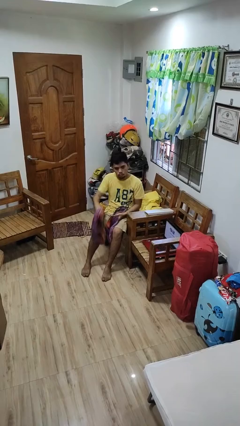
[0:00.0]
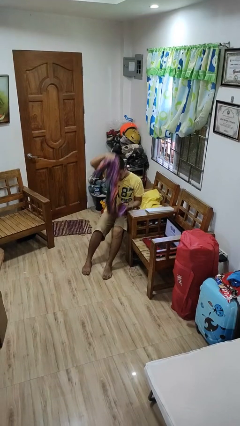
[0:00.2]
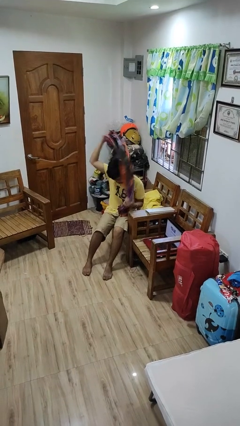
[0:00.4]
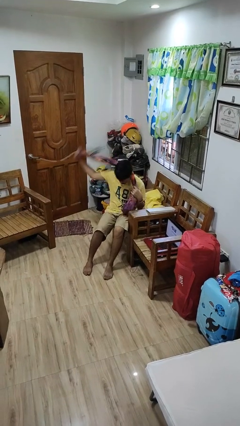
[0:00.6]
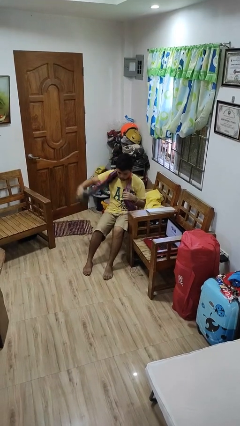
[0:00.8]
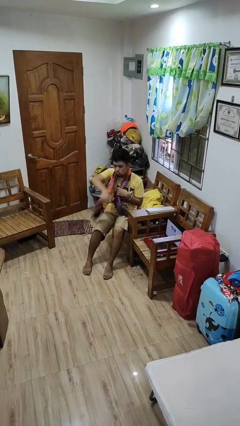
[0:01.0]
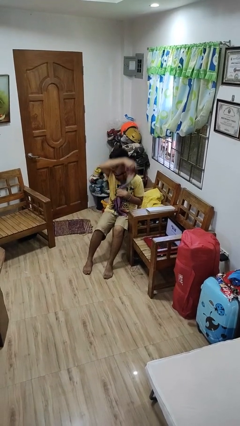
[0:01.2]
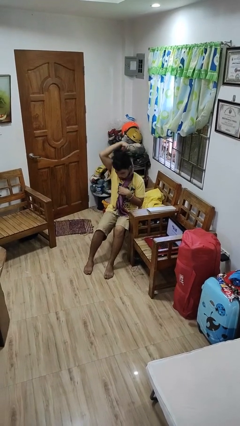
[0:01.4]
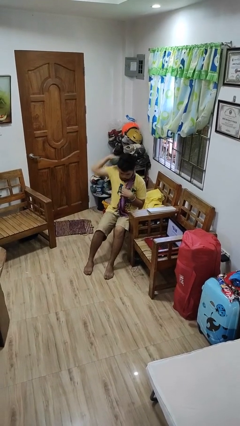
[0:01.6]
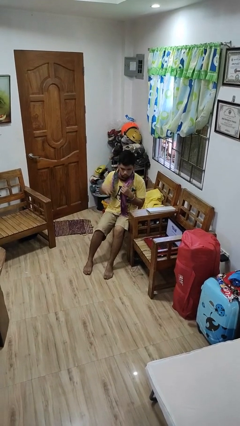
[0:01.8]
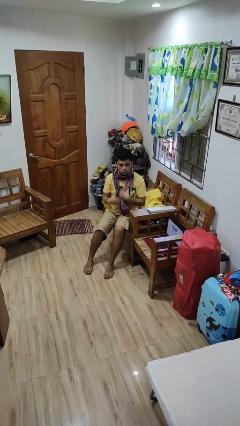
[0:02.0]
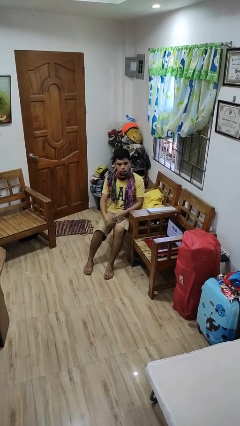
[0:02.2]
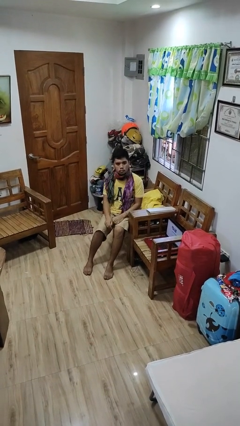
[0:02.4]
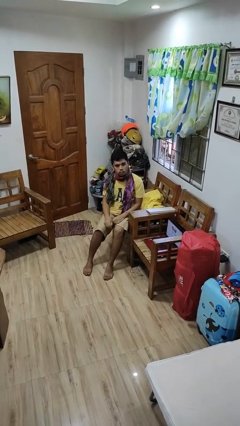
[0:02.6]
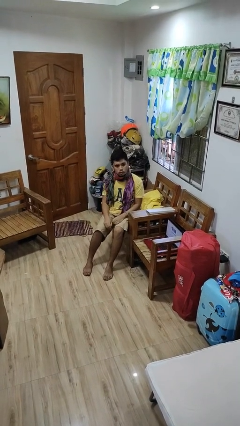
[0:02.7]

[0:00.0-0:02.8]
person puts on scarf

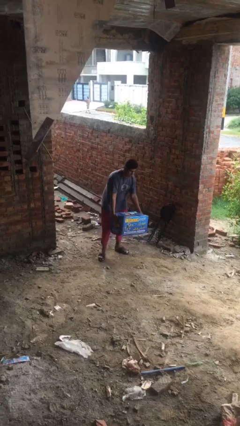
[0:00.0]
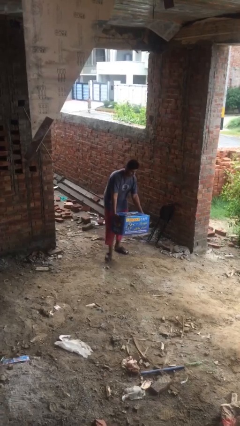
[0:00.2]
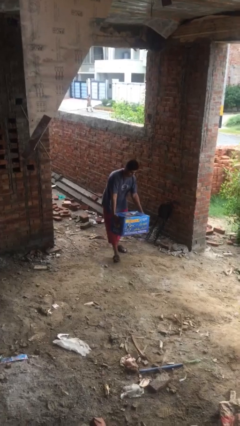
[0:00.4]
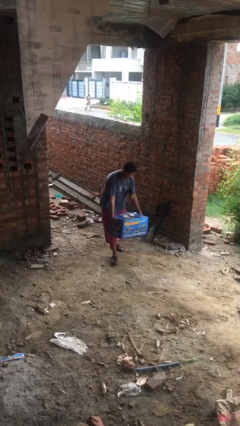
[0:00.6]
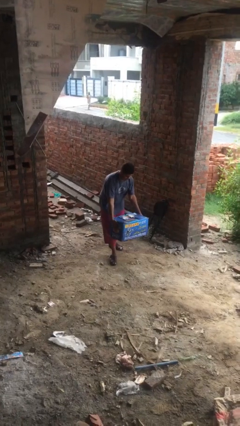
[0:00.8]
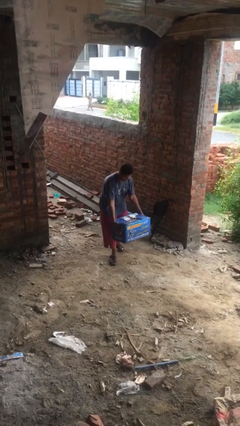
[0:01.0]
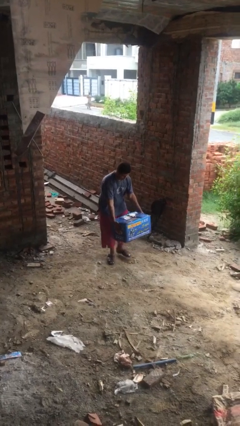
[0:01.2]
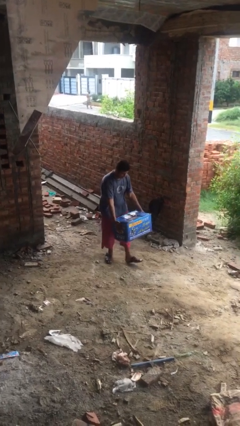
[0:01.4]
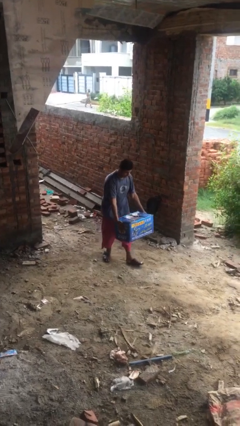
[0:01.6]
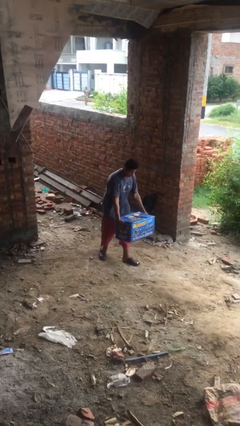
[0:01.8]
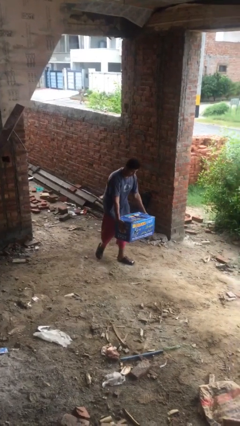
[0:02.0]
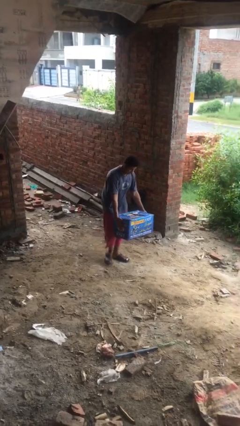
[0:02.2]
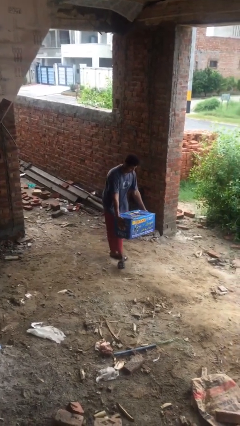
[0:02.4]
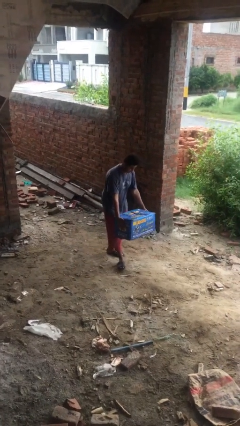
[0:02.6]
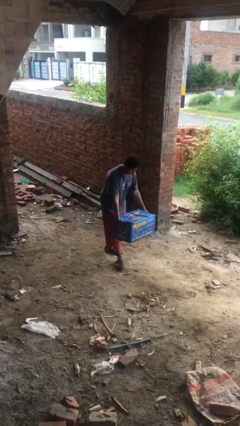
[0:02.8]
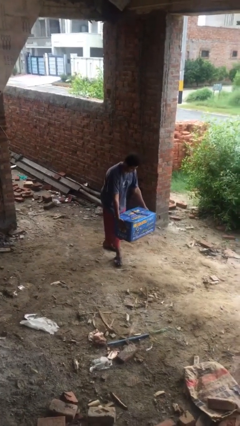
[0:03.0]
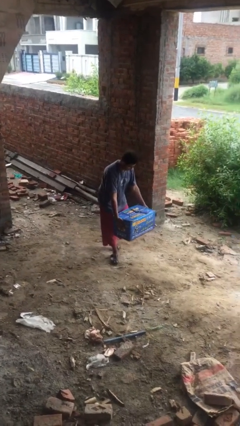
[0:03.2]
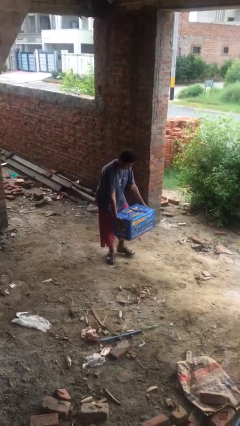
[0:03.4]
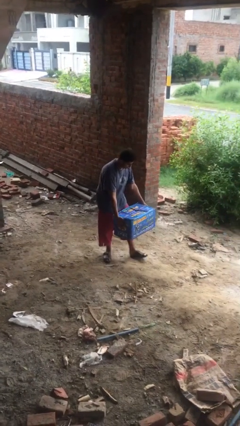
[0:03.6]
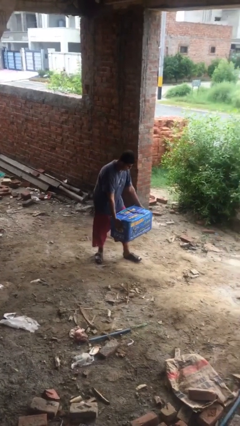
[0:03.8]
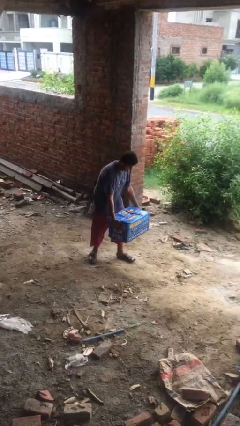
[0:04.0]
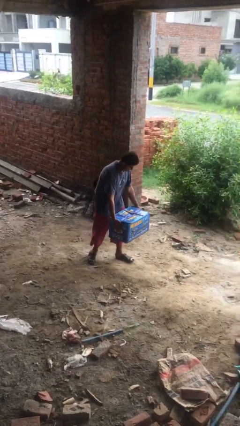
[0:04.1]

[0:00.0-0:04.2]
person carries heavy object

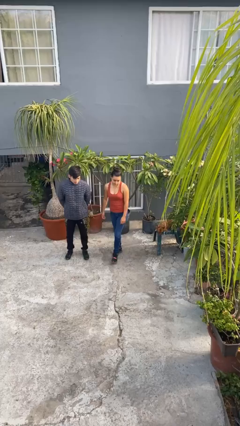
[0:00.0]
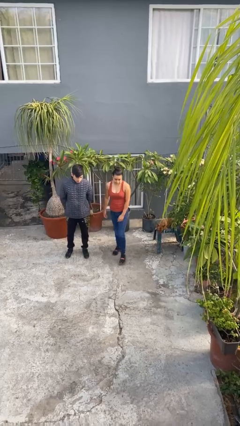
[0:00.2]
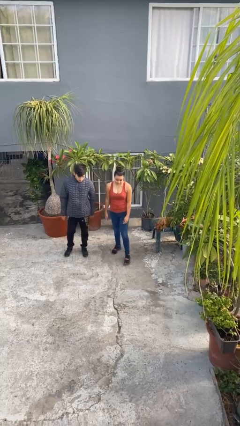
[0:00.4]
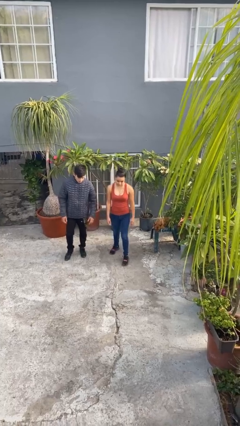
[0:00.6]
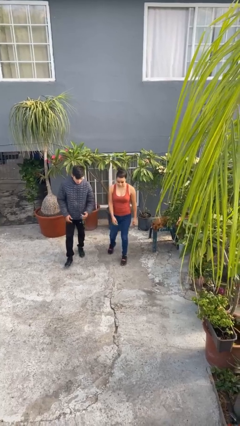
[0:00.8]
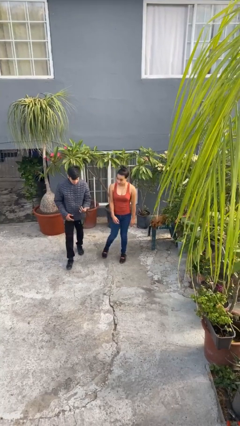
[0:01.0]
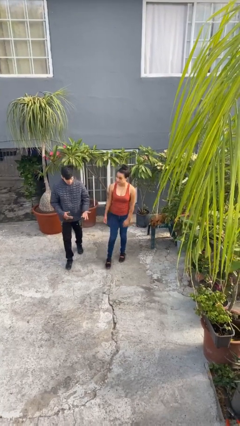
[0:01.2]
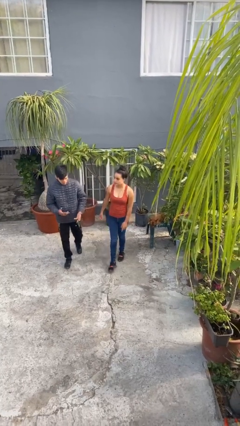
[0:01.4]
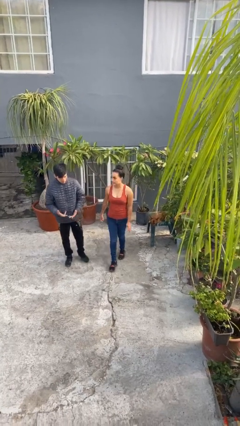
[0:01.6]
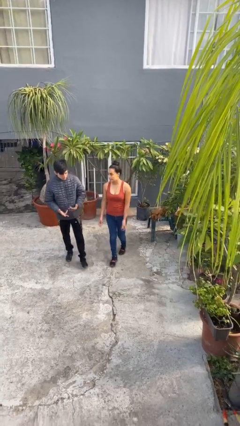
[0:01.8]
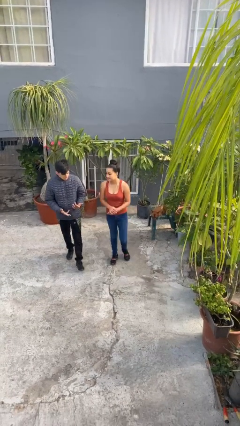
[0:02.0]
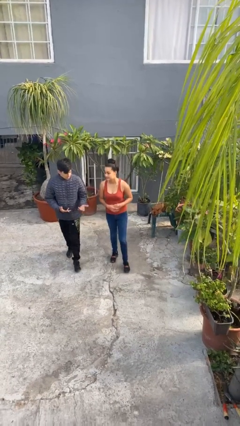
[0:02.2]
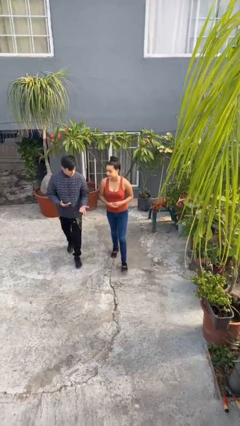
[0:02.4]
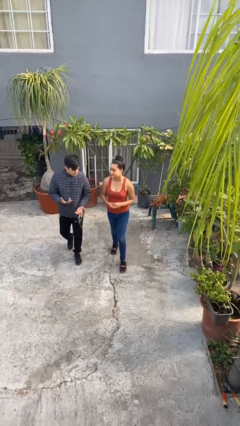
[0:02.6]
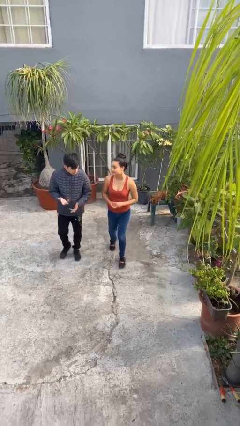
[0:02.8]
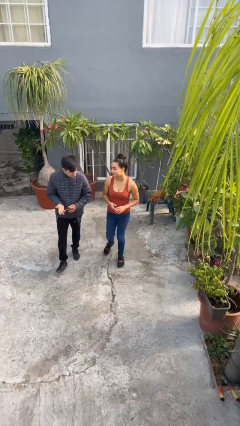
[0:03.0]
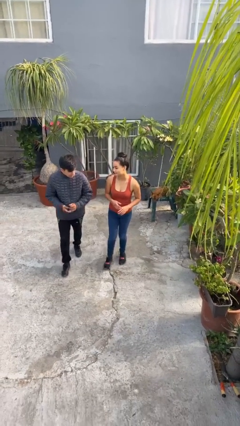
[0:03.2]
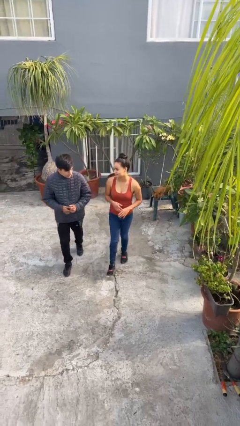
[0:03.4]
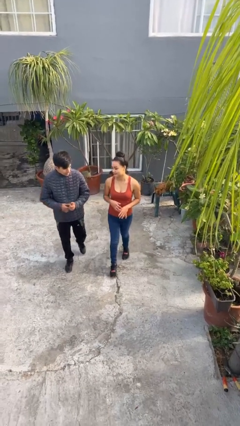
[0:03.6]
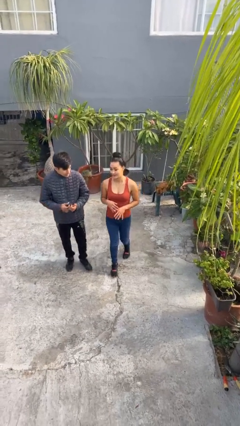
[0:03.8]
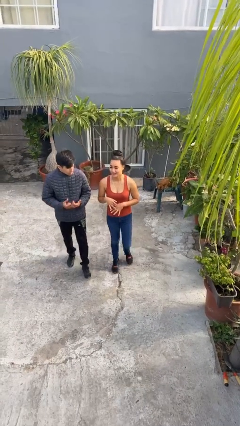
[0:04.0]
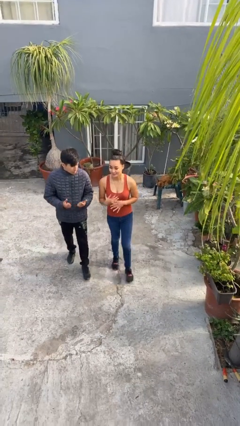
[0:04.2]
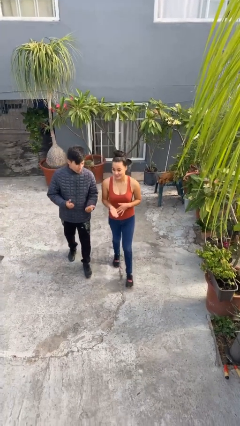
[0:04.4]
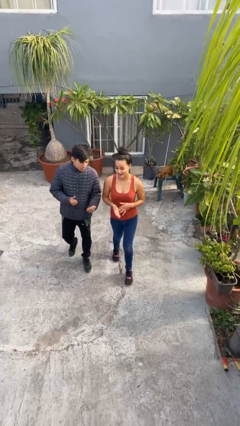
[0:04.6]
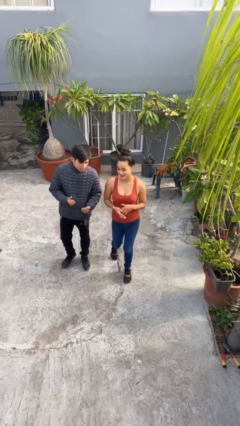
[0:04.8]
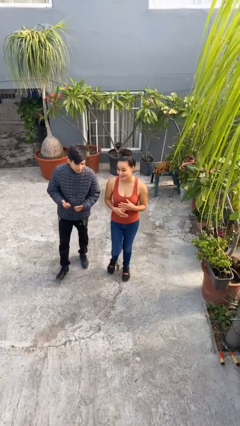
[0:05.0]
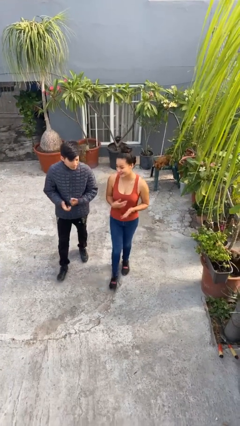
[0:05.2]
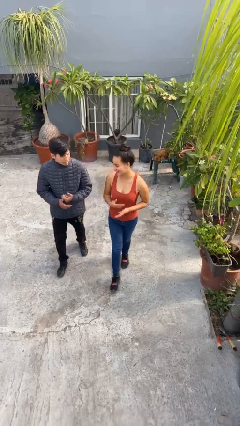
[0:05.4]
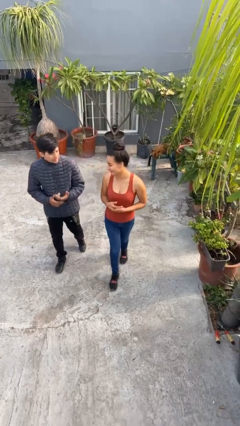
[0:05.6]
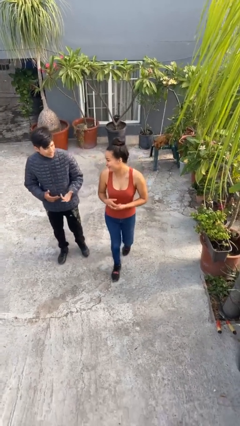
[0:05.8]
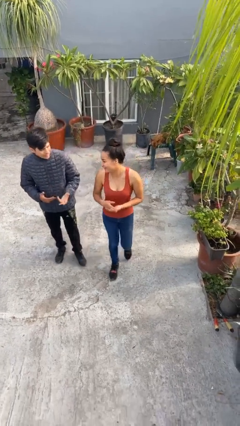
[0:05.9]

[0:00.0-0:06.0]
person talks to person

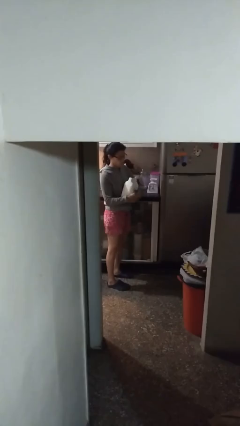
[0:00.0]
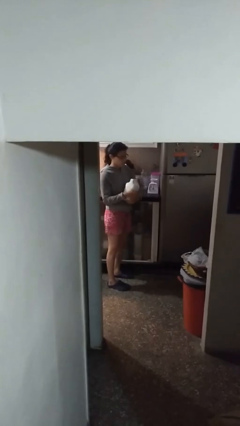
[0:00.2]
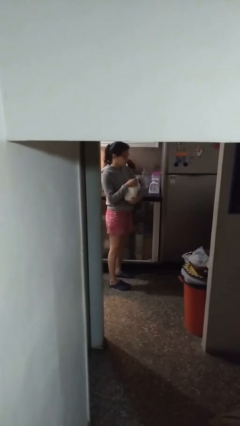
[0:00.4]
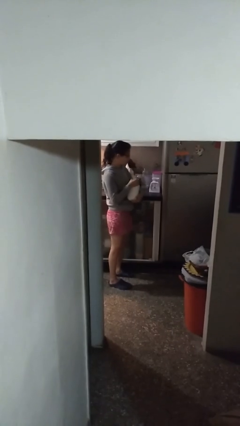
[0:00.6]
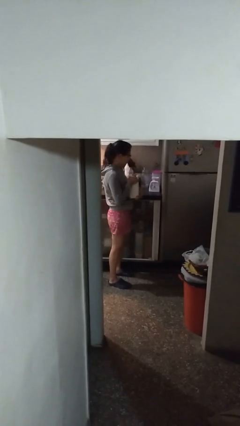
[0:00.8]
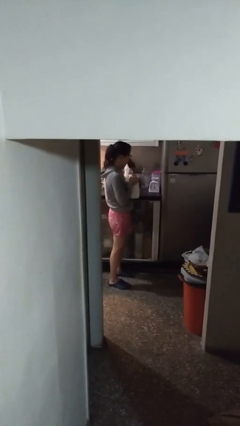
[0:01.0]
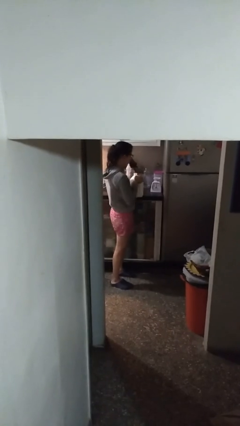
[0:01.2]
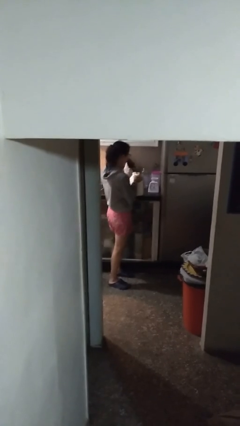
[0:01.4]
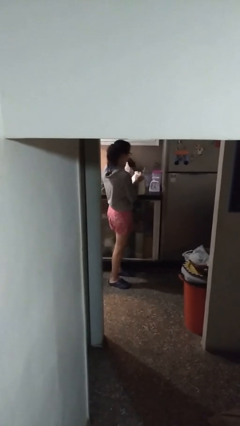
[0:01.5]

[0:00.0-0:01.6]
person puts down object on countertop

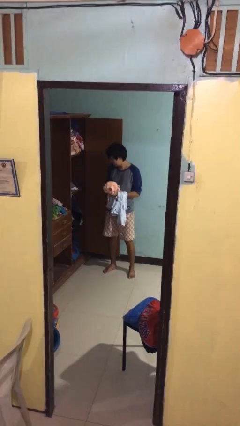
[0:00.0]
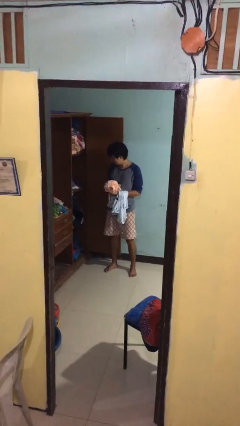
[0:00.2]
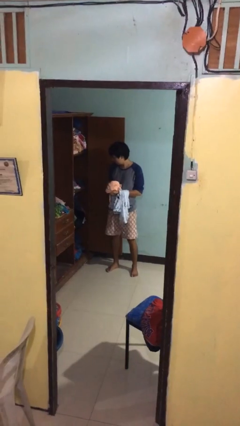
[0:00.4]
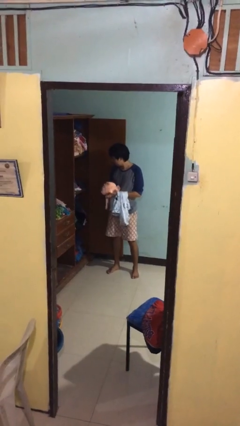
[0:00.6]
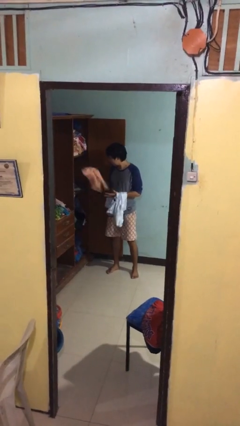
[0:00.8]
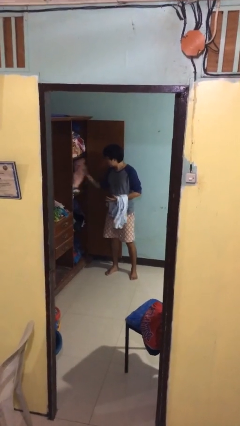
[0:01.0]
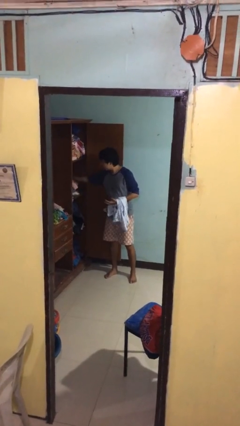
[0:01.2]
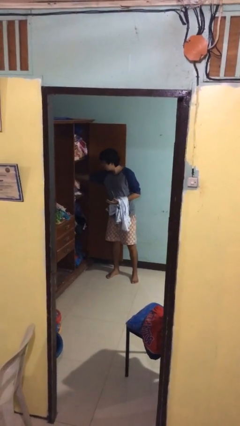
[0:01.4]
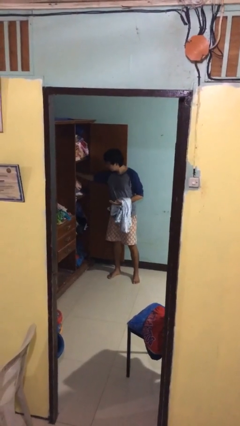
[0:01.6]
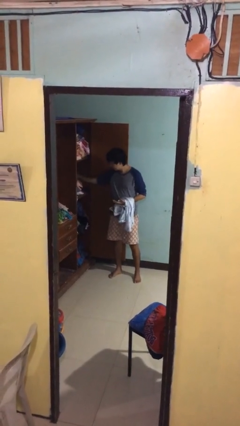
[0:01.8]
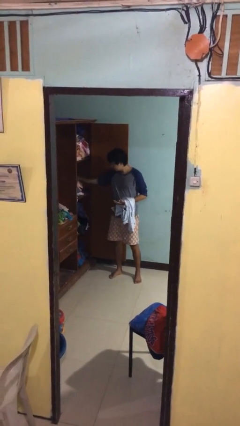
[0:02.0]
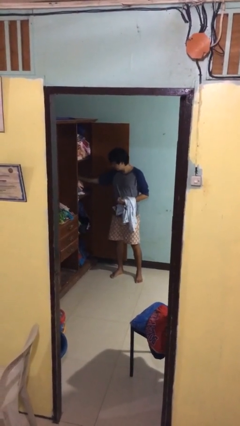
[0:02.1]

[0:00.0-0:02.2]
person puts clothes into dresser

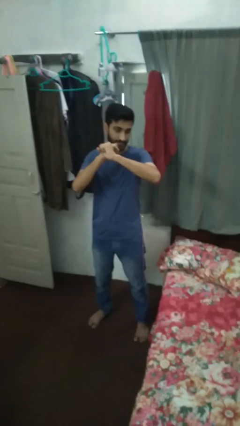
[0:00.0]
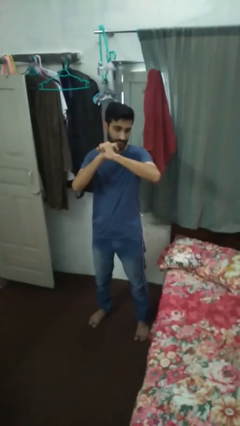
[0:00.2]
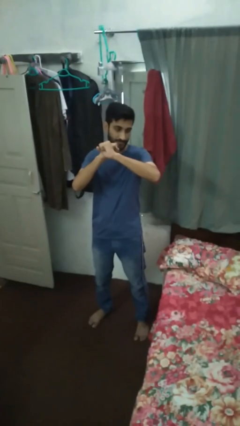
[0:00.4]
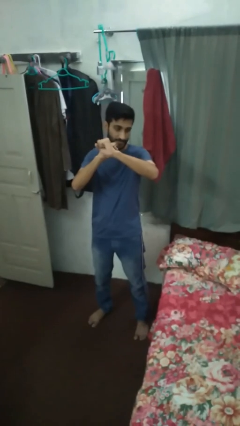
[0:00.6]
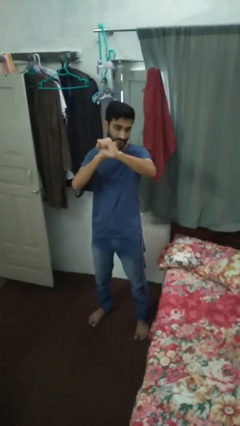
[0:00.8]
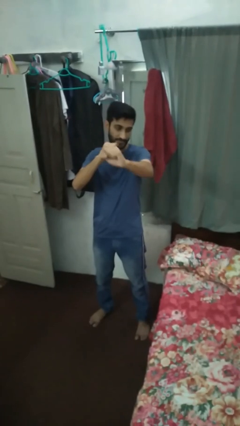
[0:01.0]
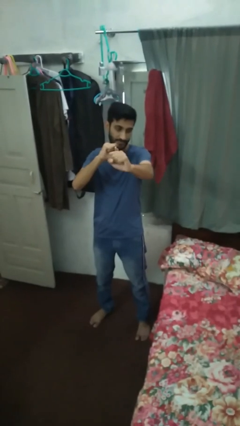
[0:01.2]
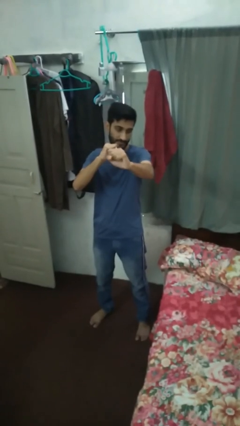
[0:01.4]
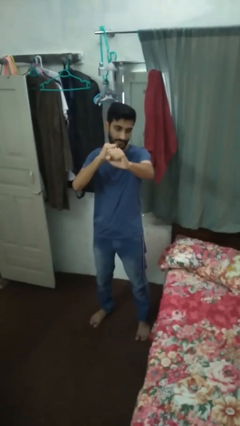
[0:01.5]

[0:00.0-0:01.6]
person gestures zoom in
